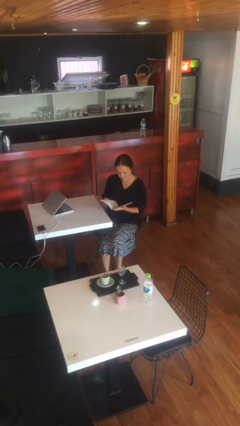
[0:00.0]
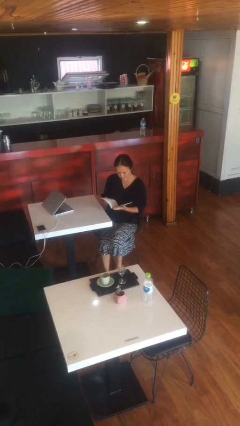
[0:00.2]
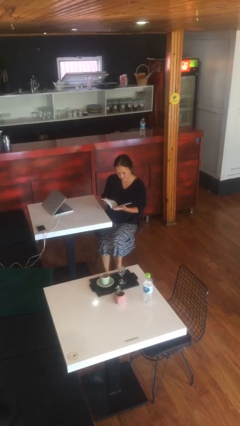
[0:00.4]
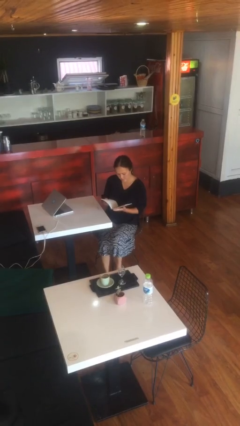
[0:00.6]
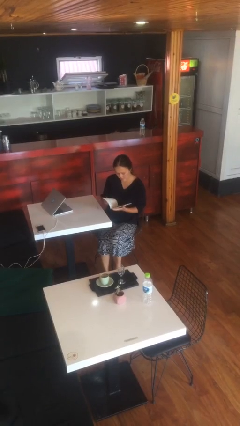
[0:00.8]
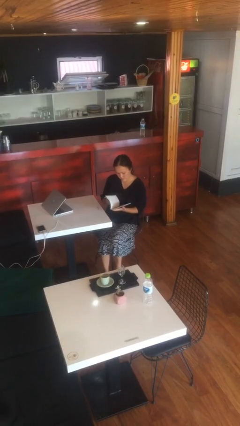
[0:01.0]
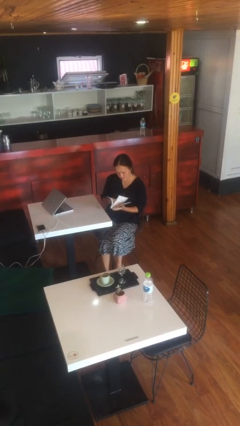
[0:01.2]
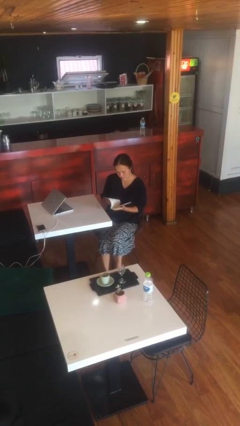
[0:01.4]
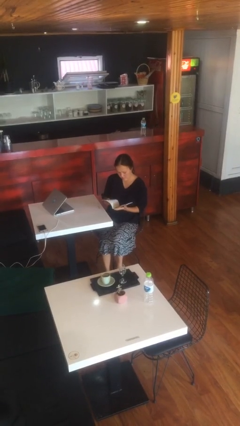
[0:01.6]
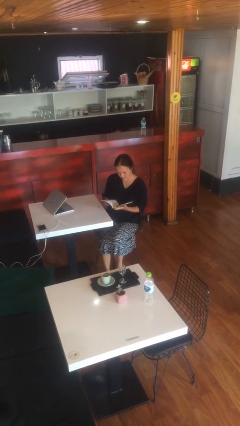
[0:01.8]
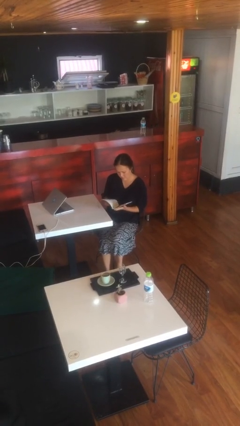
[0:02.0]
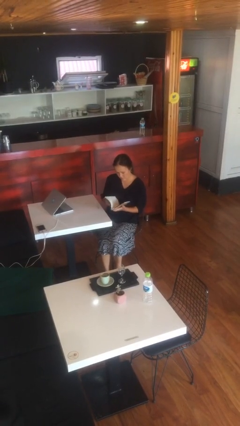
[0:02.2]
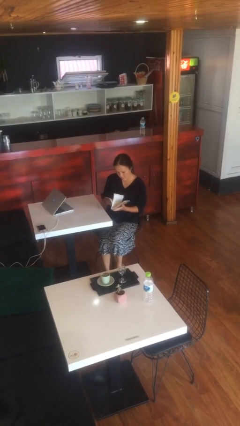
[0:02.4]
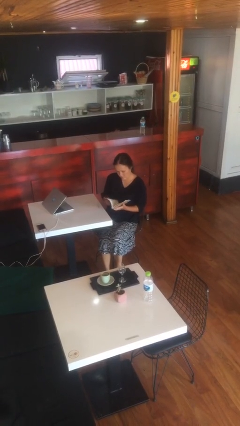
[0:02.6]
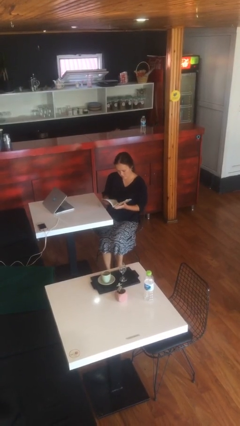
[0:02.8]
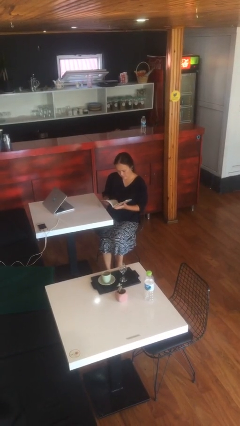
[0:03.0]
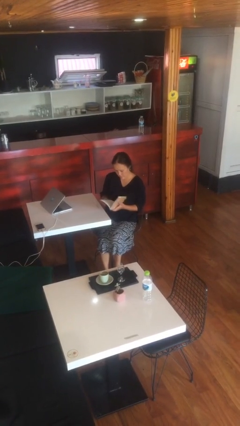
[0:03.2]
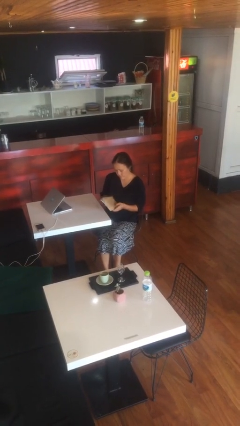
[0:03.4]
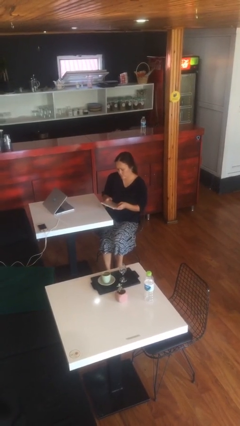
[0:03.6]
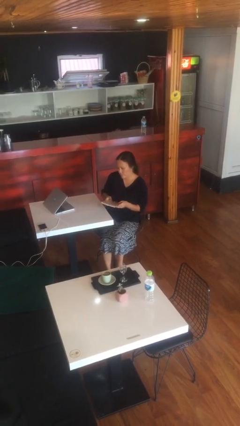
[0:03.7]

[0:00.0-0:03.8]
person reads document

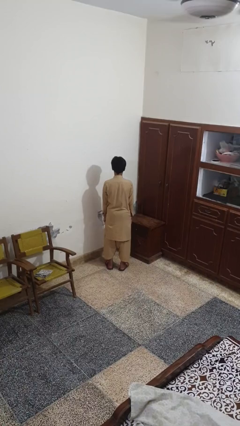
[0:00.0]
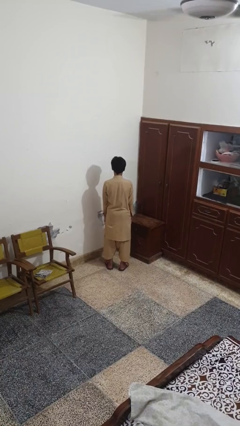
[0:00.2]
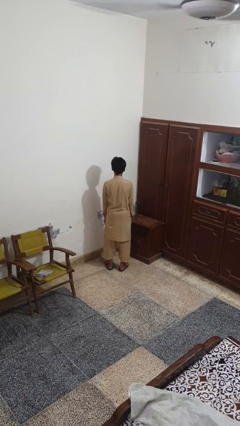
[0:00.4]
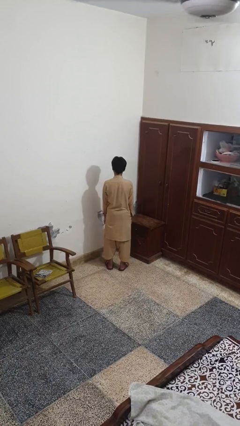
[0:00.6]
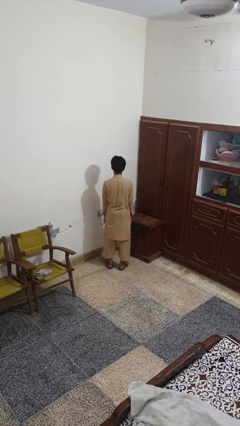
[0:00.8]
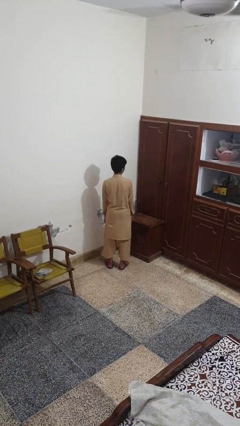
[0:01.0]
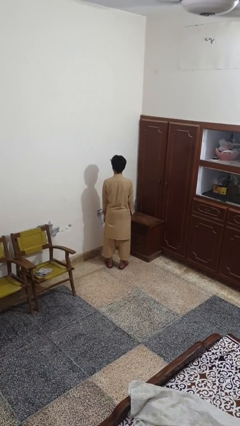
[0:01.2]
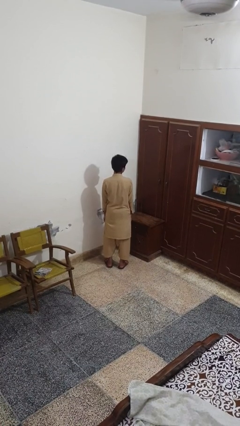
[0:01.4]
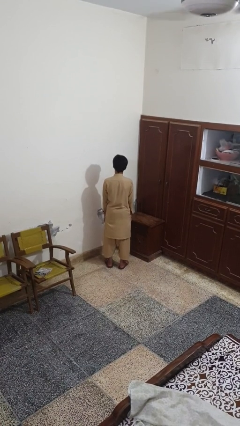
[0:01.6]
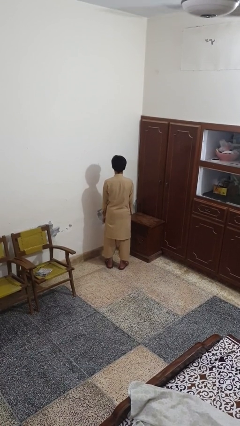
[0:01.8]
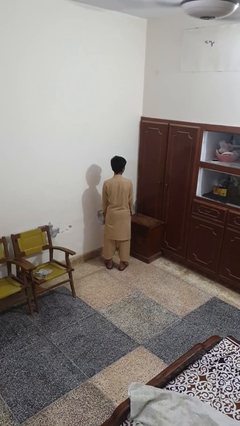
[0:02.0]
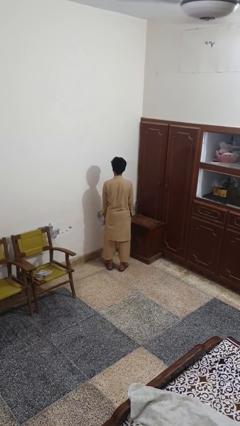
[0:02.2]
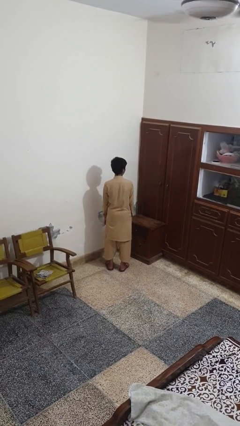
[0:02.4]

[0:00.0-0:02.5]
person shakes head

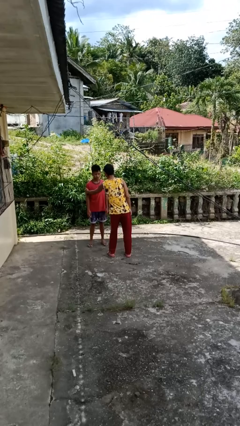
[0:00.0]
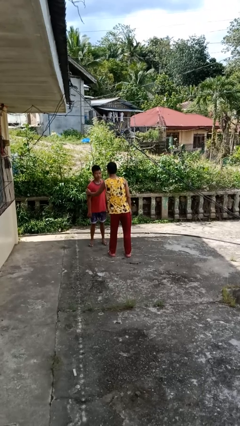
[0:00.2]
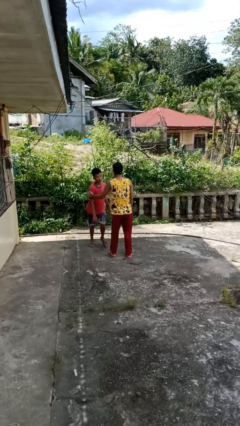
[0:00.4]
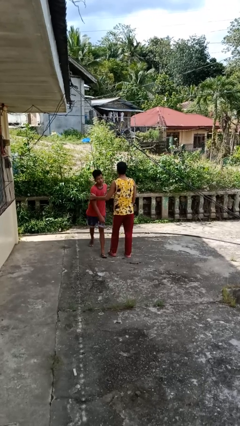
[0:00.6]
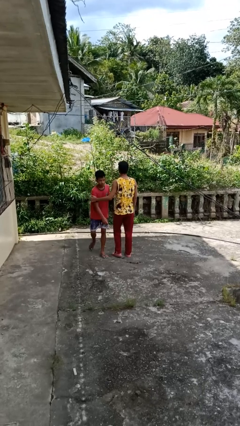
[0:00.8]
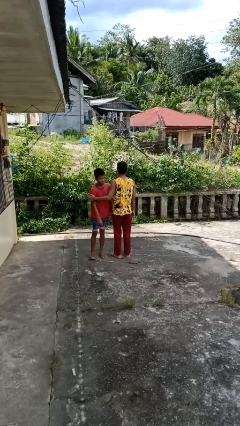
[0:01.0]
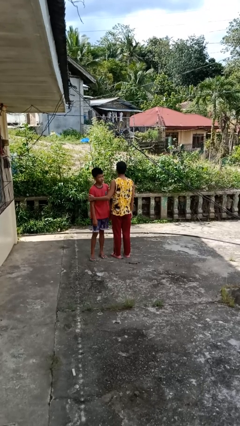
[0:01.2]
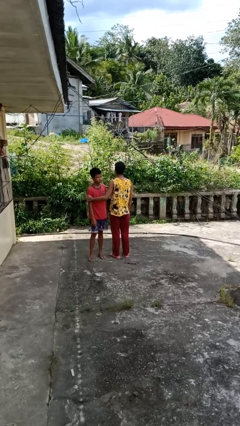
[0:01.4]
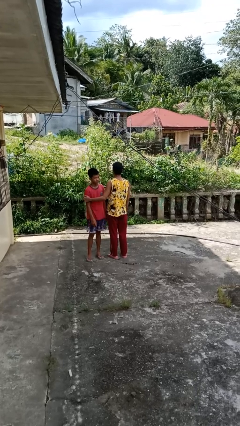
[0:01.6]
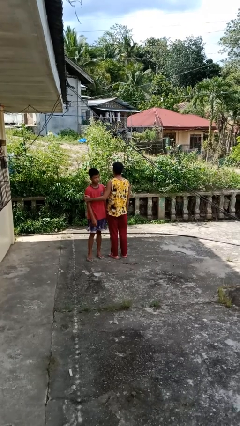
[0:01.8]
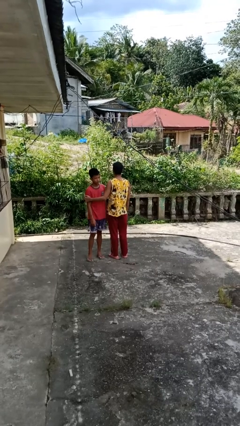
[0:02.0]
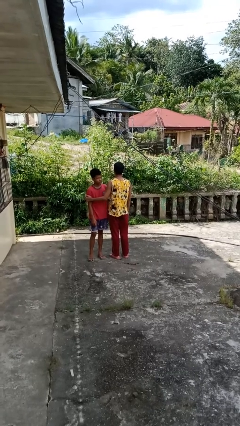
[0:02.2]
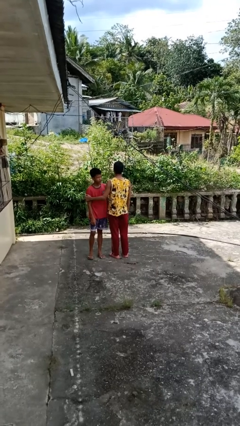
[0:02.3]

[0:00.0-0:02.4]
person grabs person by bicep

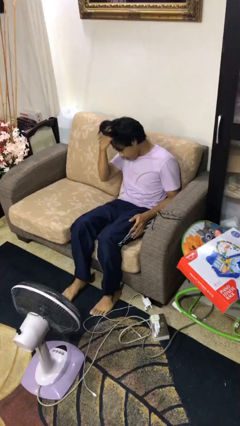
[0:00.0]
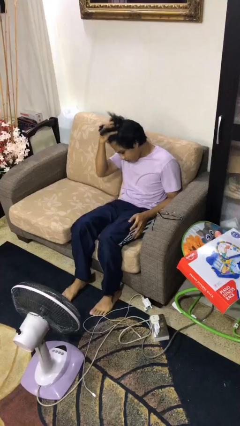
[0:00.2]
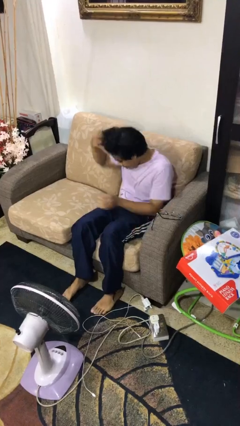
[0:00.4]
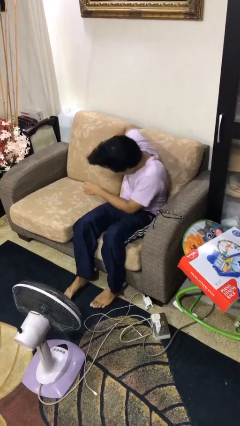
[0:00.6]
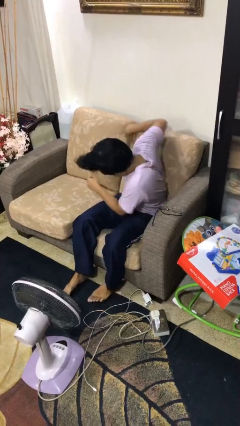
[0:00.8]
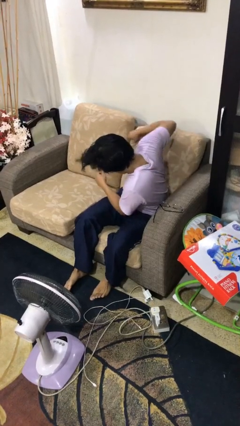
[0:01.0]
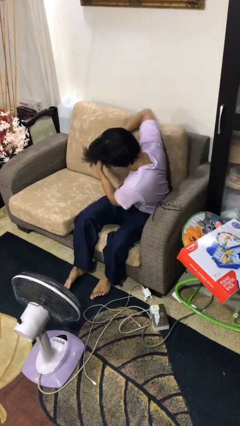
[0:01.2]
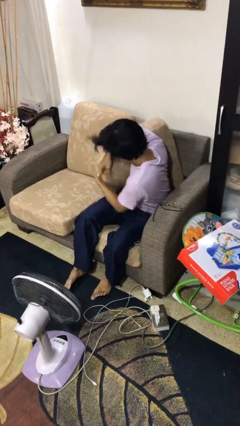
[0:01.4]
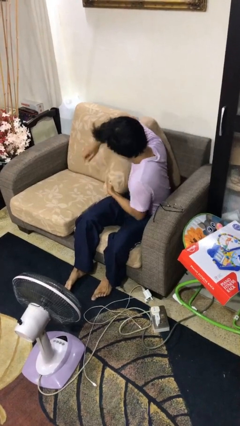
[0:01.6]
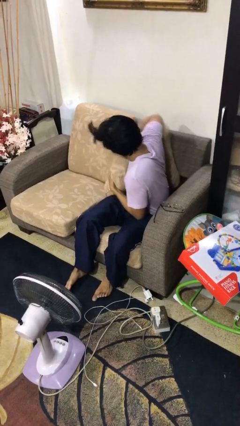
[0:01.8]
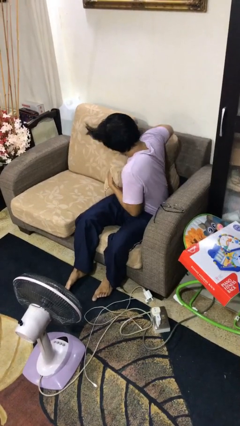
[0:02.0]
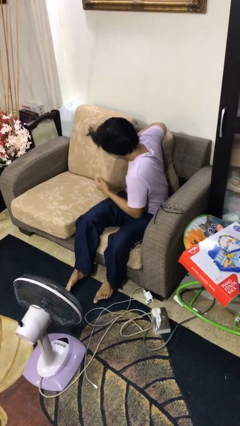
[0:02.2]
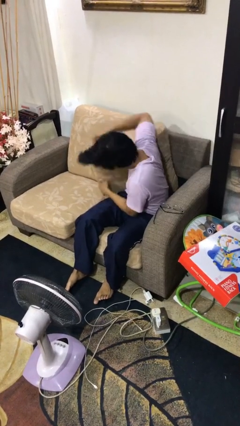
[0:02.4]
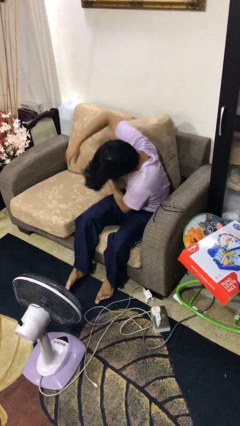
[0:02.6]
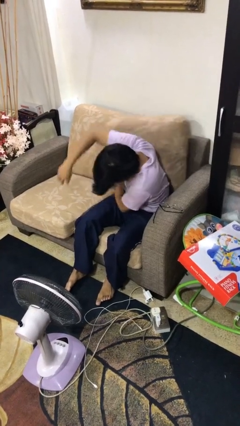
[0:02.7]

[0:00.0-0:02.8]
person searches in couch

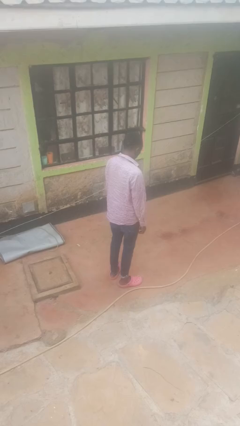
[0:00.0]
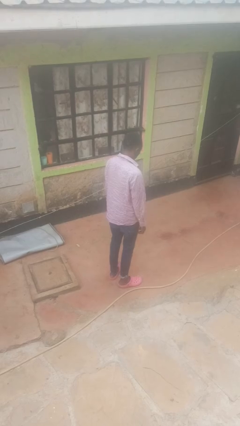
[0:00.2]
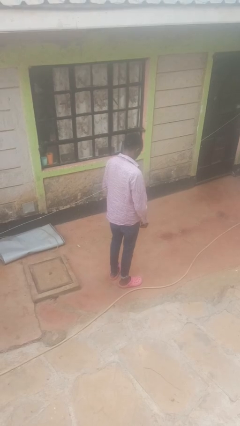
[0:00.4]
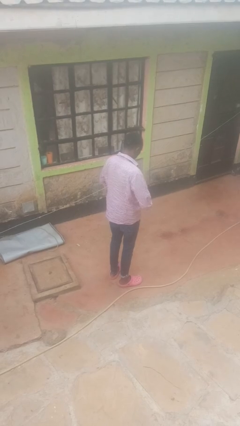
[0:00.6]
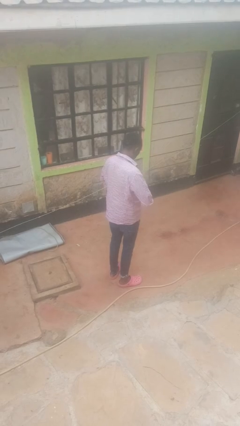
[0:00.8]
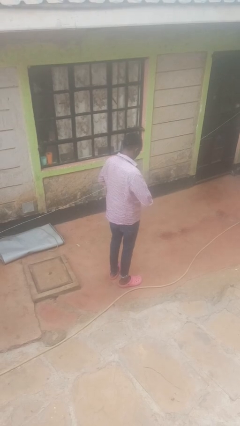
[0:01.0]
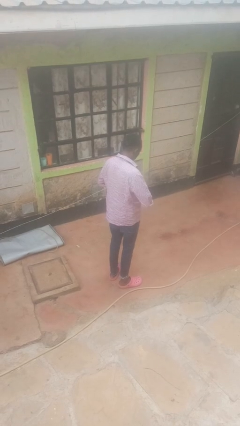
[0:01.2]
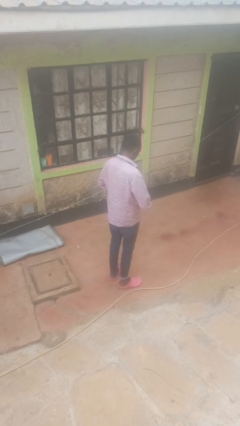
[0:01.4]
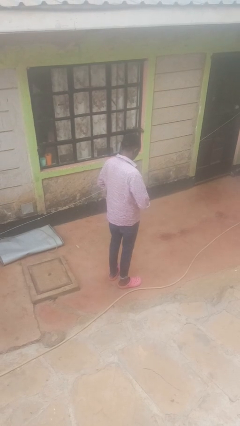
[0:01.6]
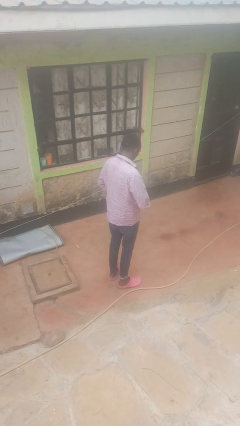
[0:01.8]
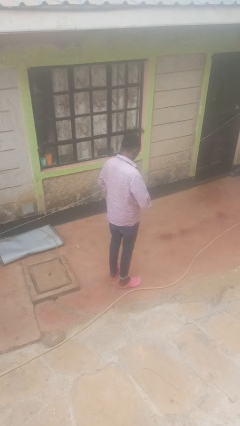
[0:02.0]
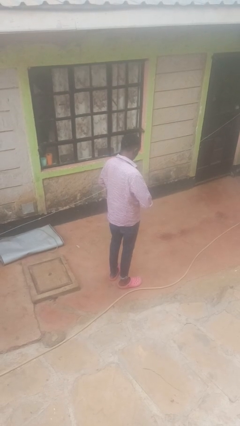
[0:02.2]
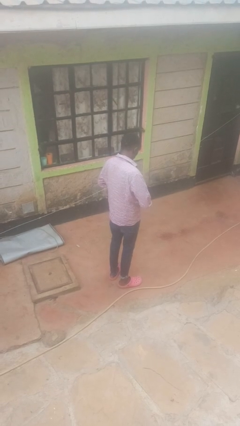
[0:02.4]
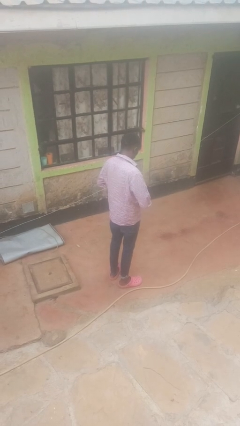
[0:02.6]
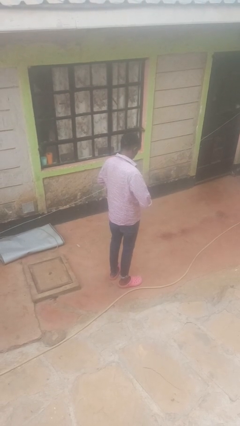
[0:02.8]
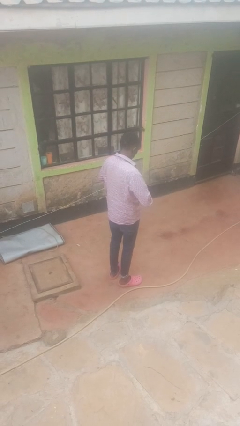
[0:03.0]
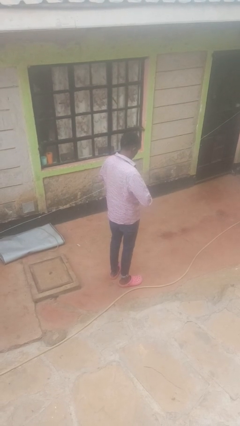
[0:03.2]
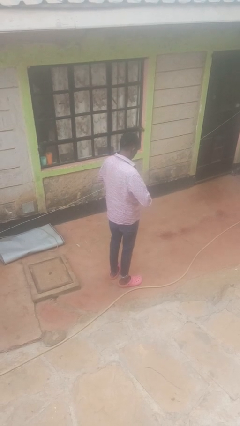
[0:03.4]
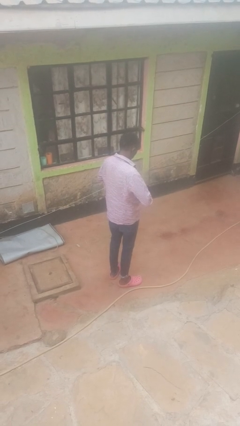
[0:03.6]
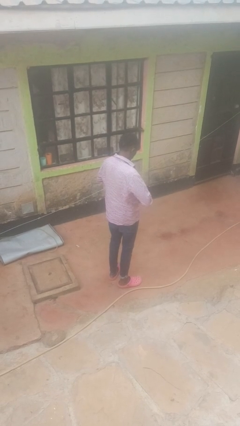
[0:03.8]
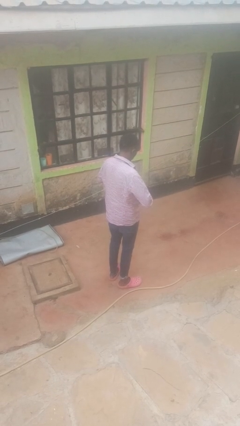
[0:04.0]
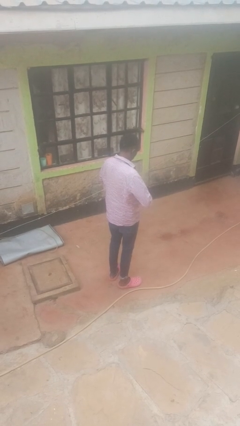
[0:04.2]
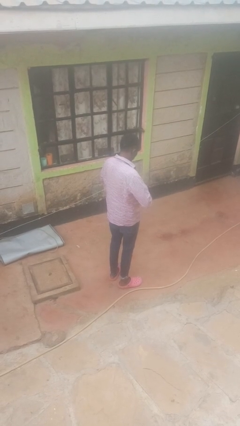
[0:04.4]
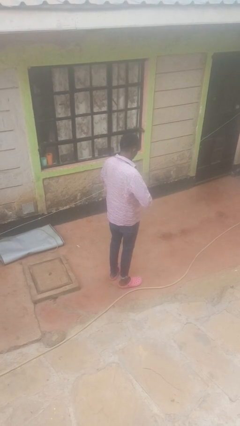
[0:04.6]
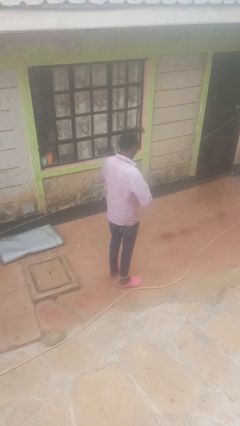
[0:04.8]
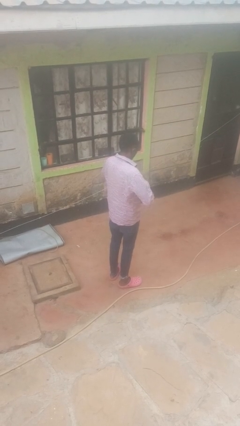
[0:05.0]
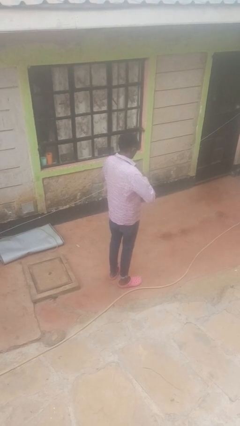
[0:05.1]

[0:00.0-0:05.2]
person buttons shirt

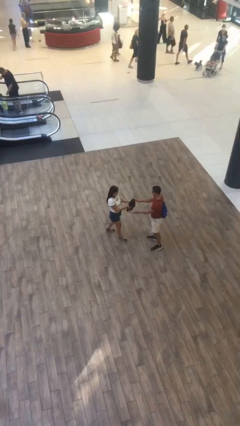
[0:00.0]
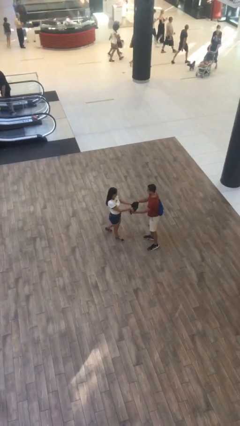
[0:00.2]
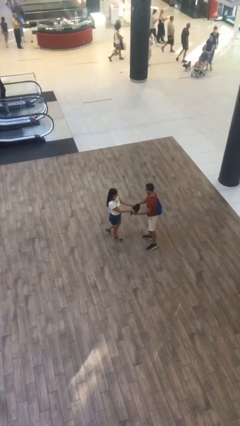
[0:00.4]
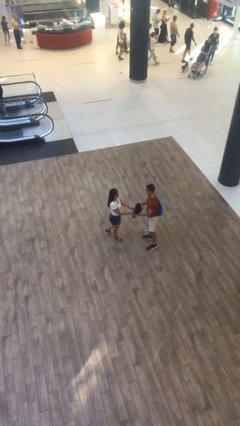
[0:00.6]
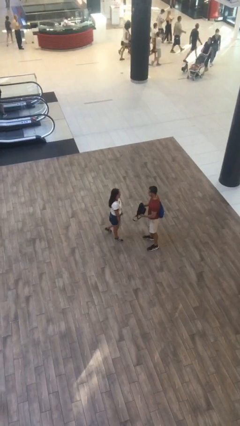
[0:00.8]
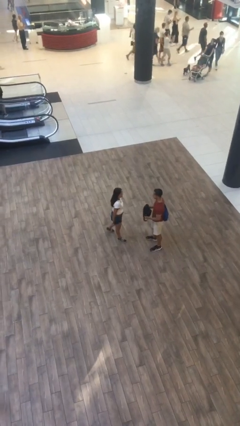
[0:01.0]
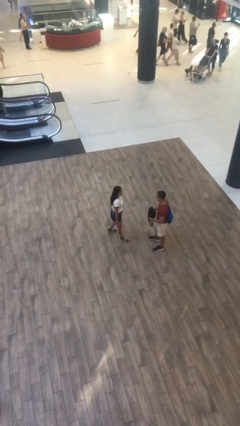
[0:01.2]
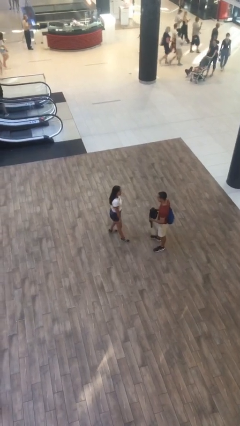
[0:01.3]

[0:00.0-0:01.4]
person transfers object to person
